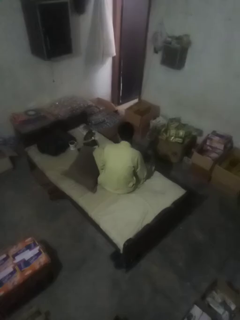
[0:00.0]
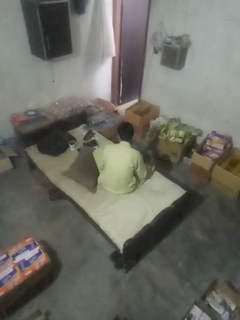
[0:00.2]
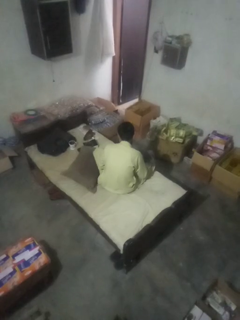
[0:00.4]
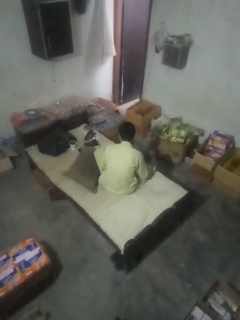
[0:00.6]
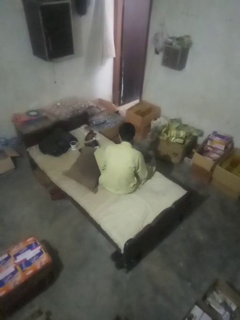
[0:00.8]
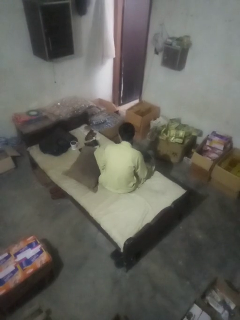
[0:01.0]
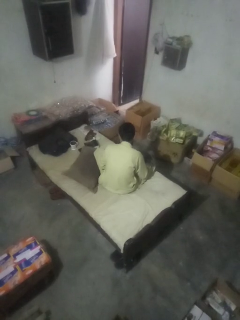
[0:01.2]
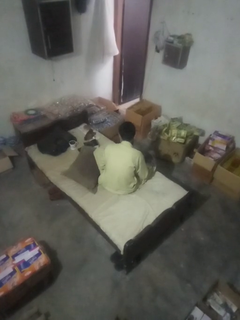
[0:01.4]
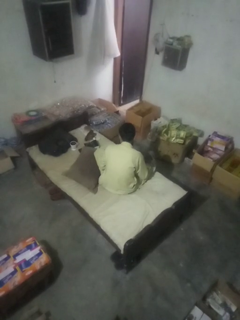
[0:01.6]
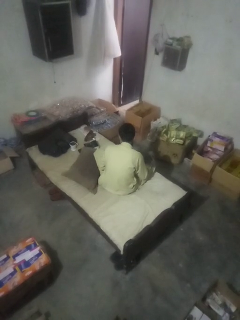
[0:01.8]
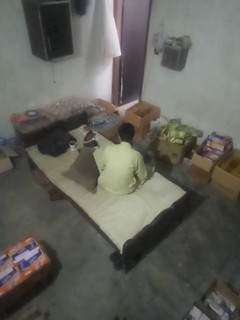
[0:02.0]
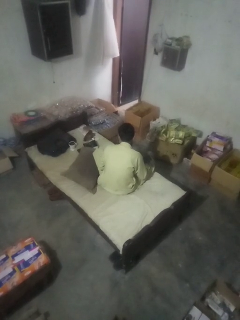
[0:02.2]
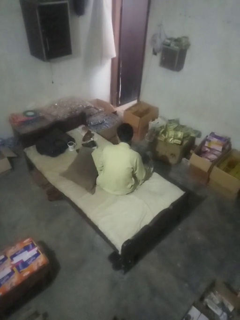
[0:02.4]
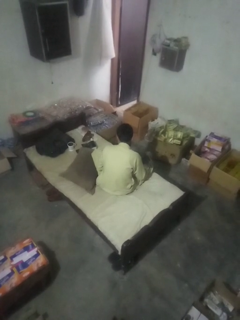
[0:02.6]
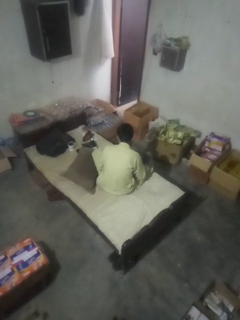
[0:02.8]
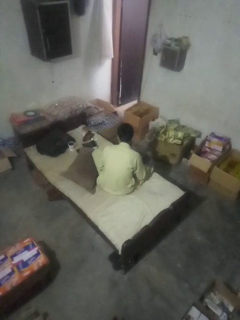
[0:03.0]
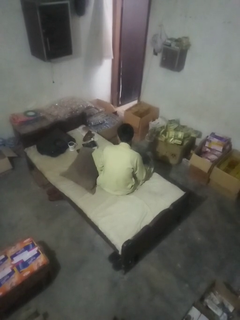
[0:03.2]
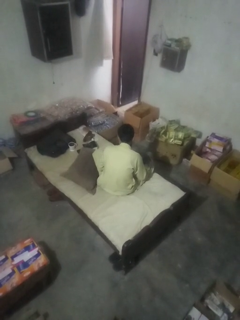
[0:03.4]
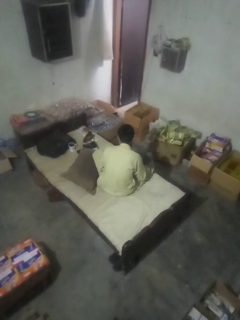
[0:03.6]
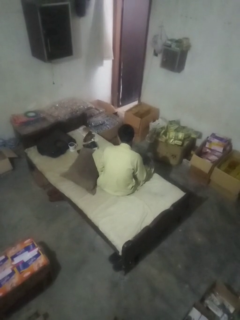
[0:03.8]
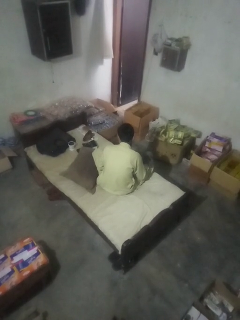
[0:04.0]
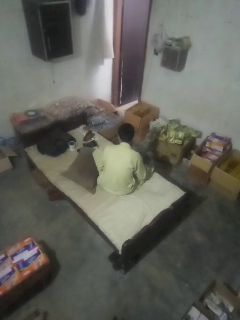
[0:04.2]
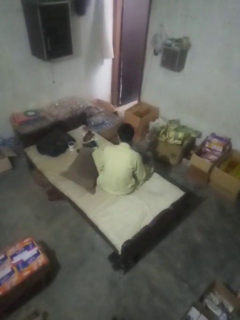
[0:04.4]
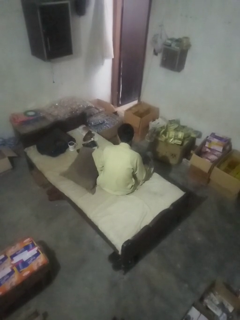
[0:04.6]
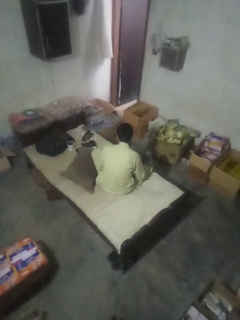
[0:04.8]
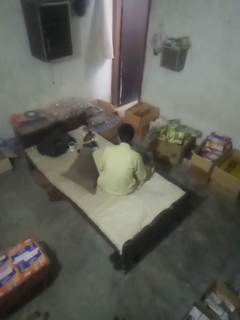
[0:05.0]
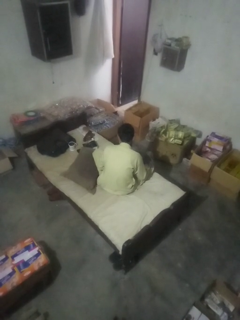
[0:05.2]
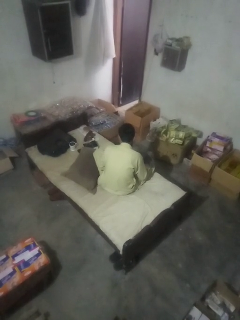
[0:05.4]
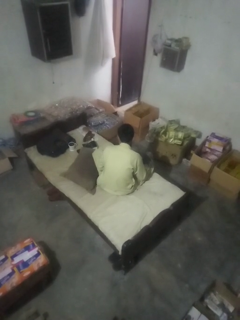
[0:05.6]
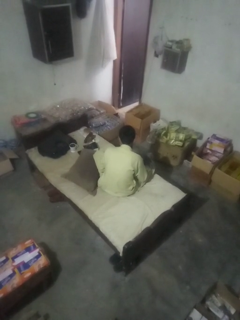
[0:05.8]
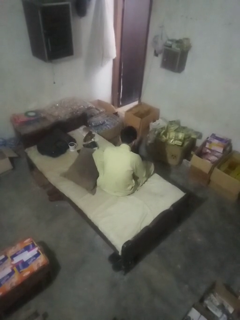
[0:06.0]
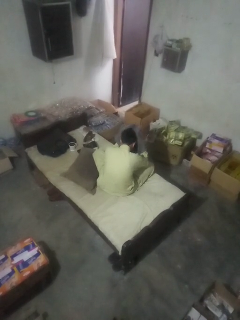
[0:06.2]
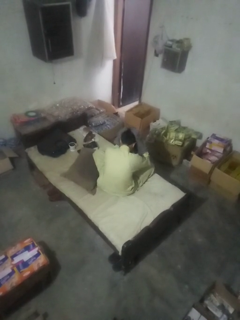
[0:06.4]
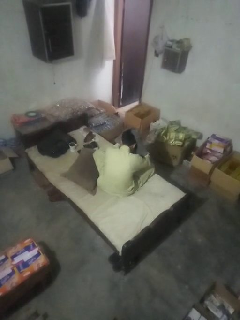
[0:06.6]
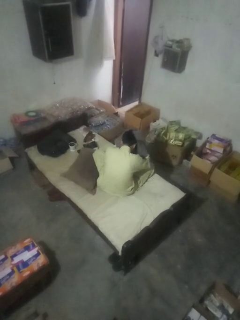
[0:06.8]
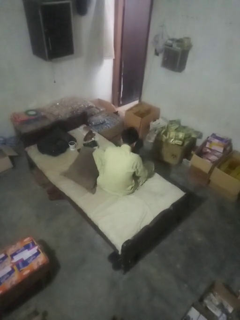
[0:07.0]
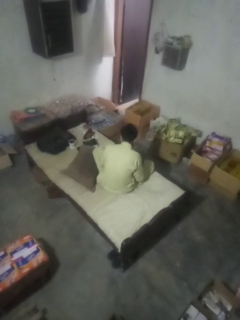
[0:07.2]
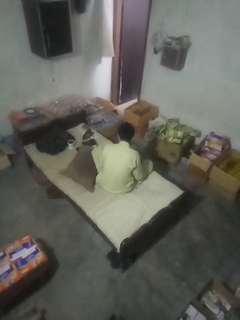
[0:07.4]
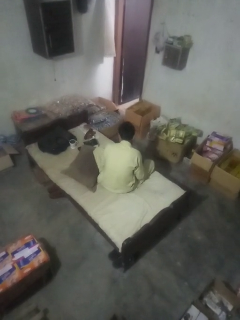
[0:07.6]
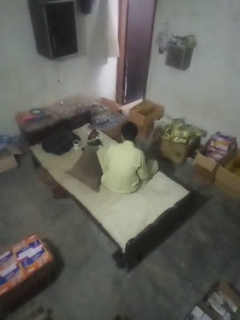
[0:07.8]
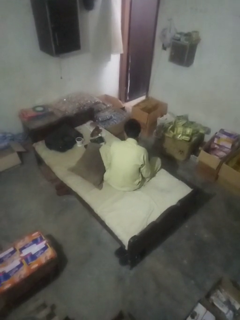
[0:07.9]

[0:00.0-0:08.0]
person dries hair with hairdryer

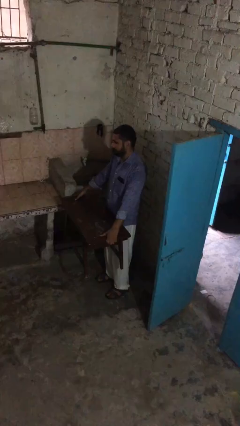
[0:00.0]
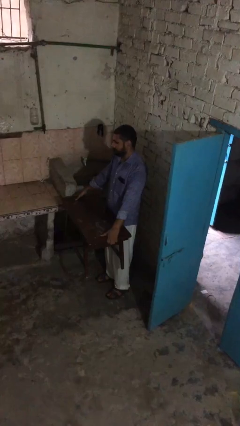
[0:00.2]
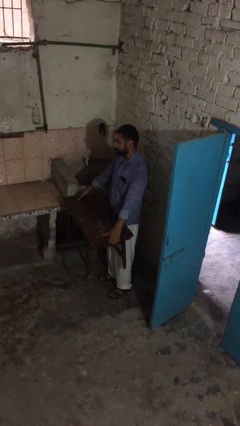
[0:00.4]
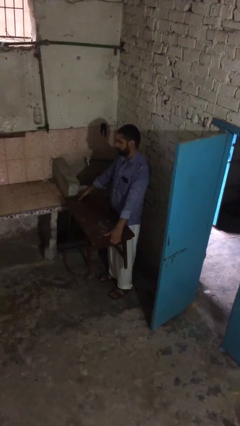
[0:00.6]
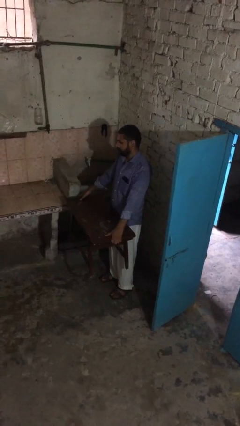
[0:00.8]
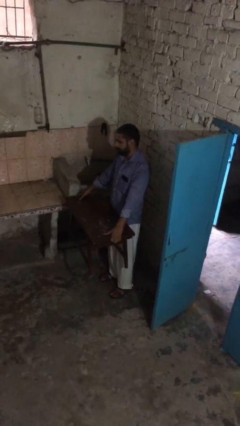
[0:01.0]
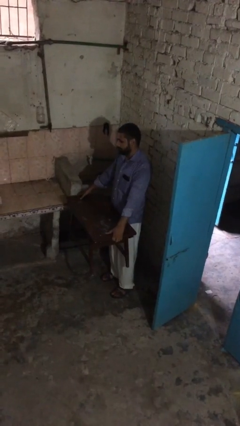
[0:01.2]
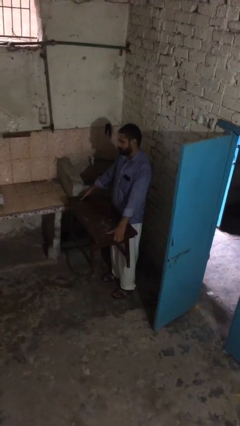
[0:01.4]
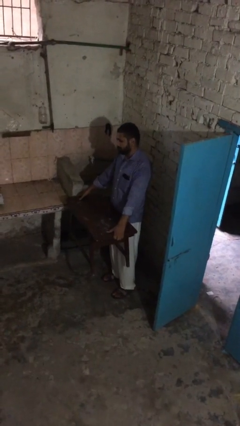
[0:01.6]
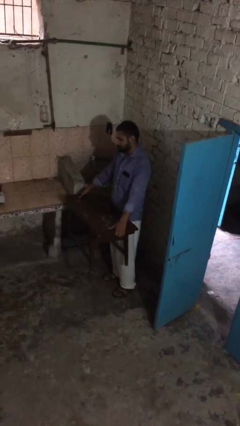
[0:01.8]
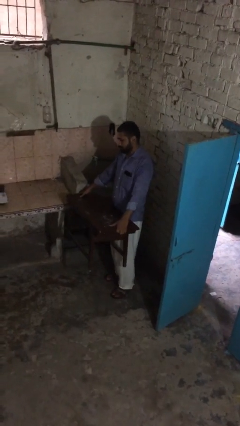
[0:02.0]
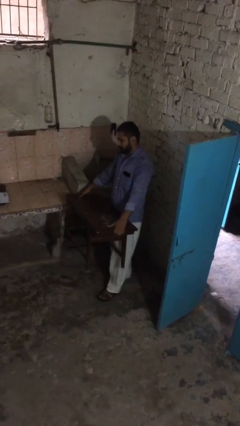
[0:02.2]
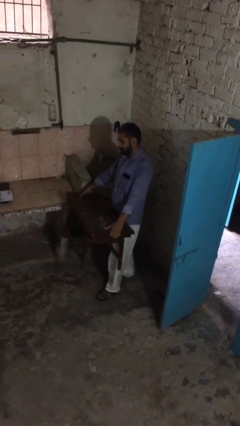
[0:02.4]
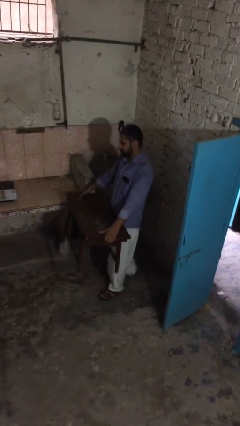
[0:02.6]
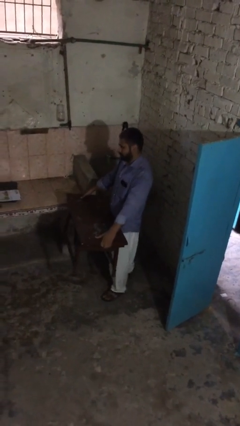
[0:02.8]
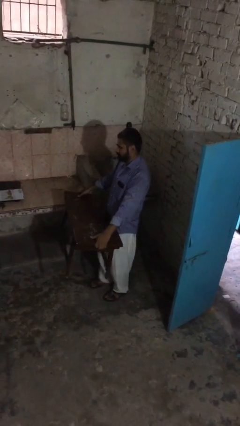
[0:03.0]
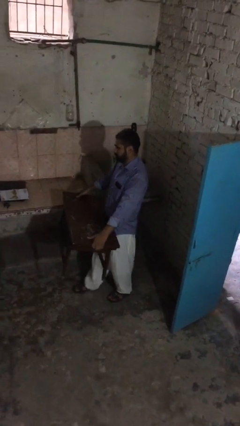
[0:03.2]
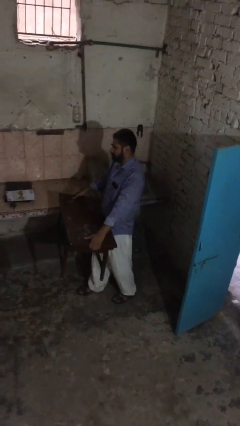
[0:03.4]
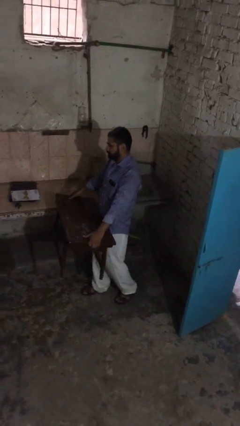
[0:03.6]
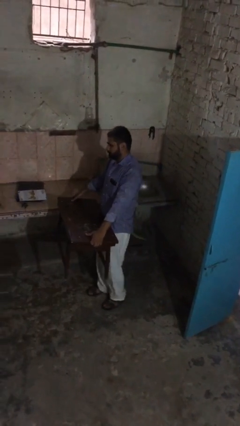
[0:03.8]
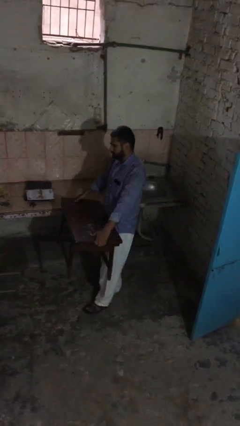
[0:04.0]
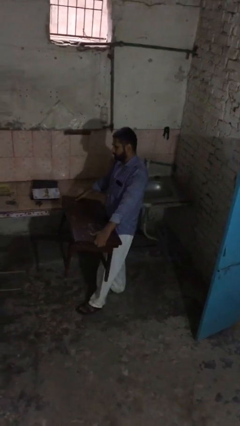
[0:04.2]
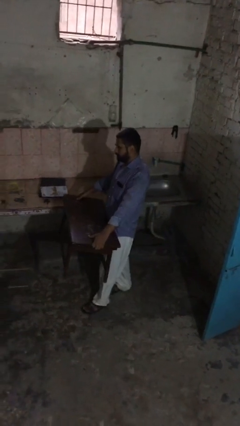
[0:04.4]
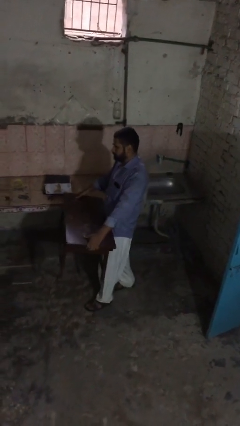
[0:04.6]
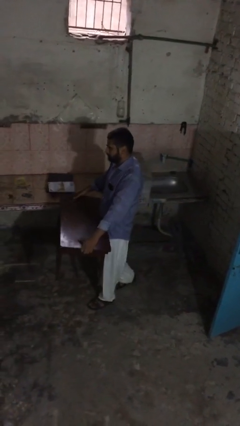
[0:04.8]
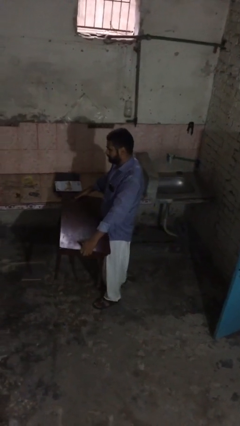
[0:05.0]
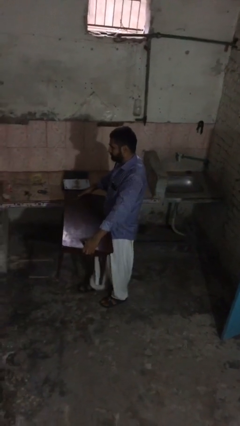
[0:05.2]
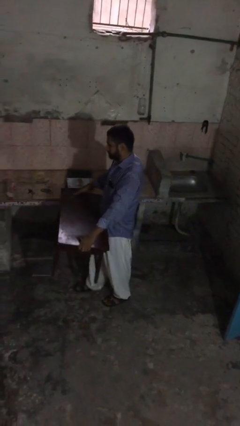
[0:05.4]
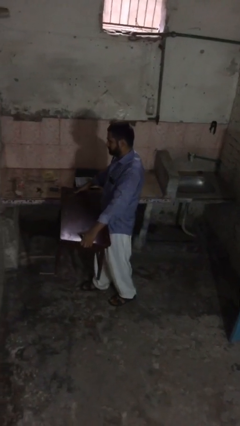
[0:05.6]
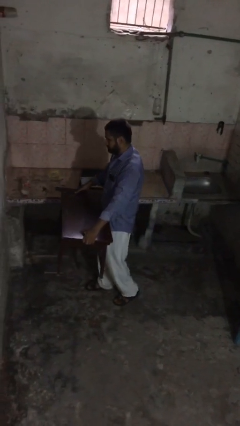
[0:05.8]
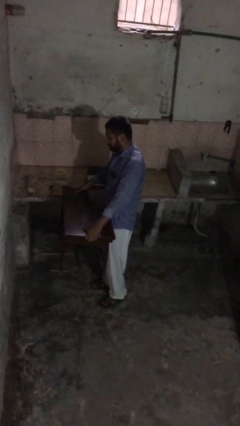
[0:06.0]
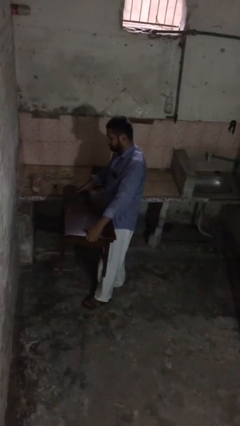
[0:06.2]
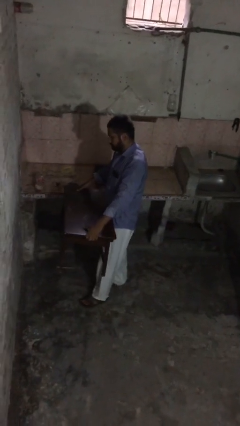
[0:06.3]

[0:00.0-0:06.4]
person carries heavy object

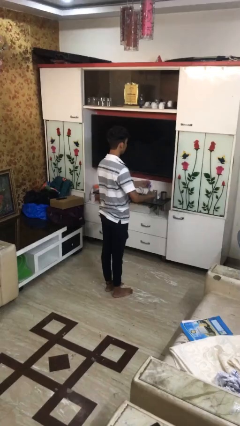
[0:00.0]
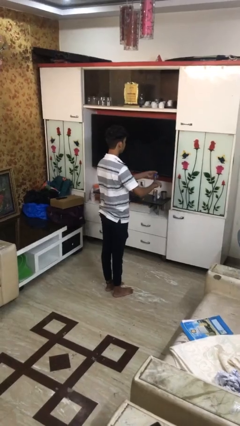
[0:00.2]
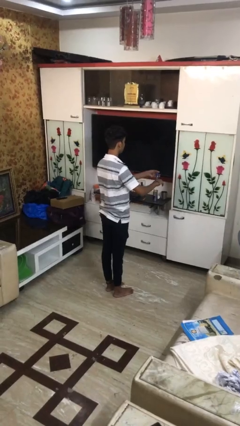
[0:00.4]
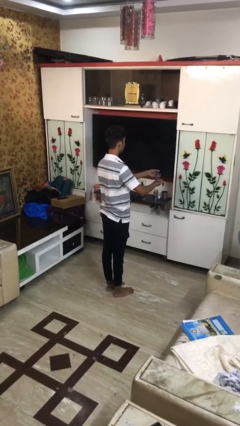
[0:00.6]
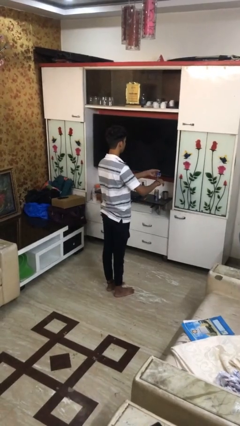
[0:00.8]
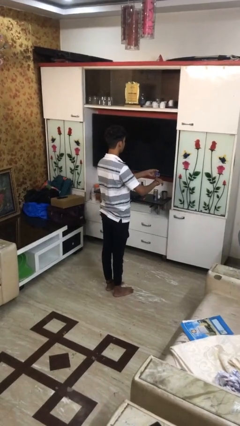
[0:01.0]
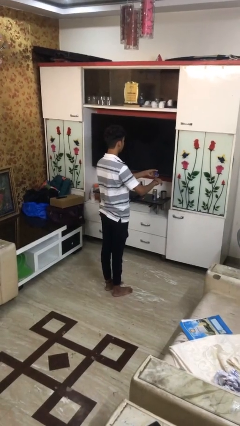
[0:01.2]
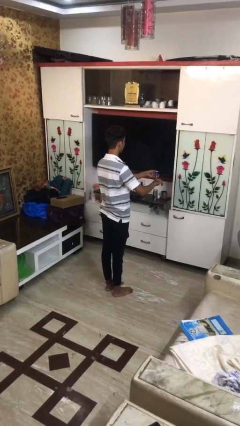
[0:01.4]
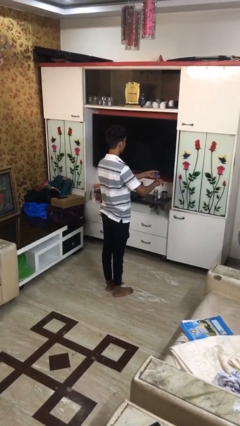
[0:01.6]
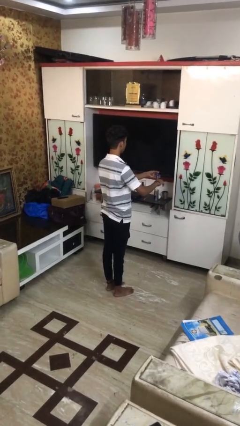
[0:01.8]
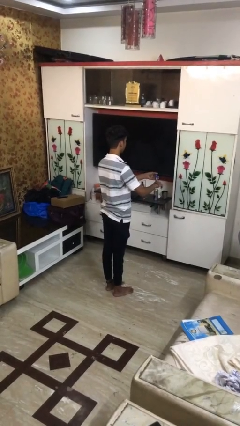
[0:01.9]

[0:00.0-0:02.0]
person clips fingernails

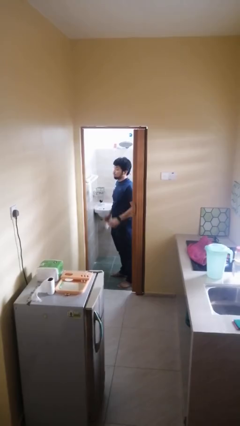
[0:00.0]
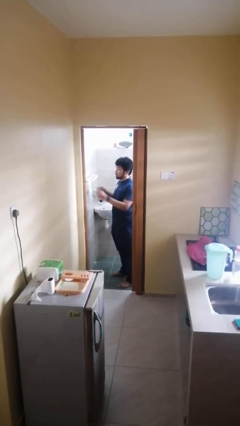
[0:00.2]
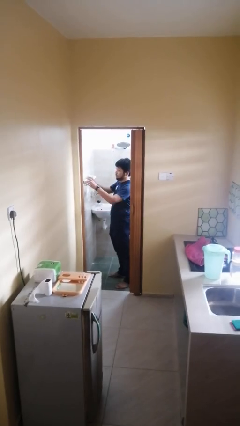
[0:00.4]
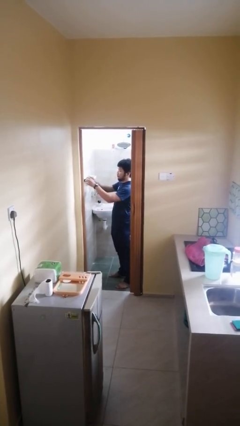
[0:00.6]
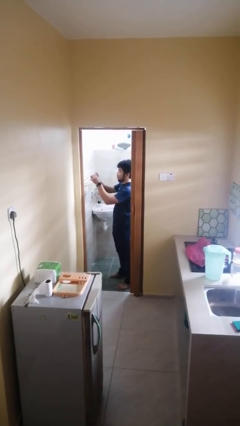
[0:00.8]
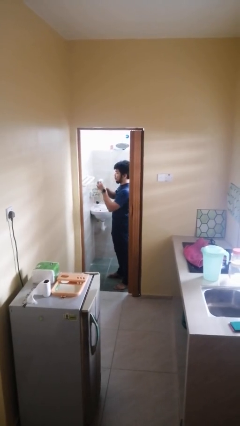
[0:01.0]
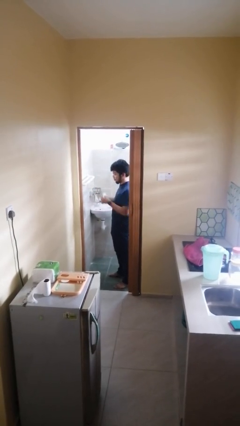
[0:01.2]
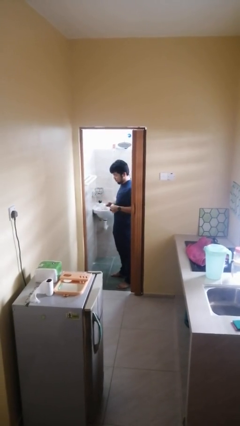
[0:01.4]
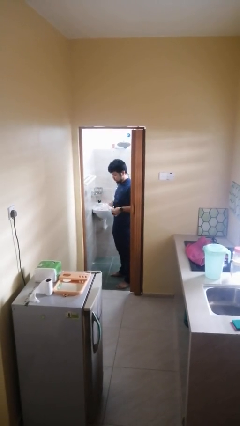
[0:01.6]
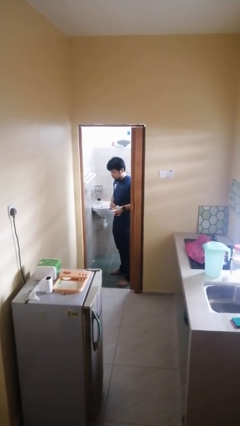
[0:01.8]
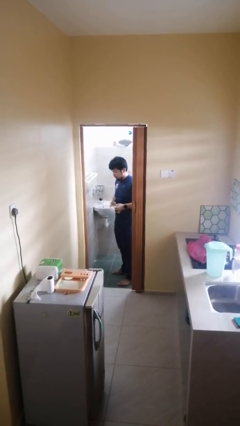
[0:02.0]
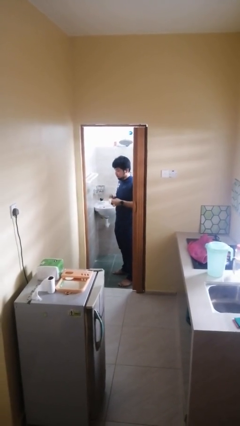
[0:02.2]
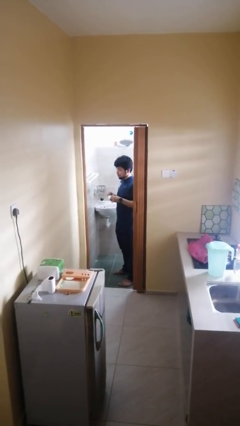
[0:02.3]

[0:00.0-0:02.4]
person picks up object from countertop

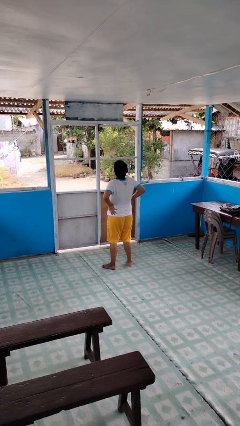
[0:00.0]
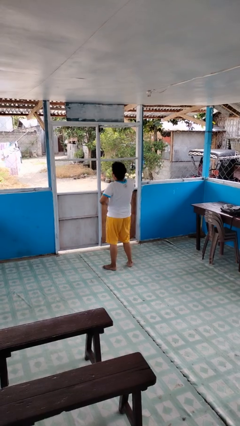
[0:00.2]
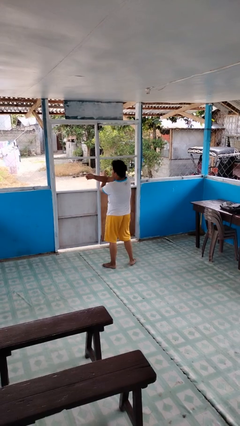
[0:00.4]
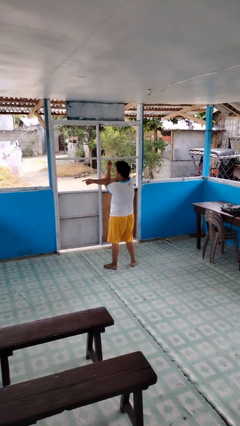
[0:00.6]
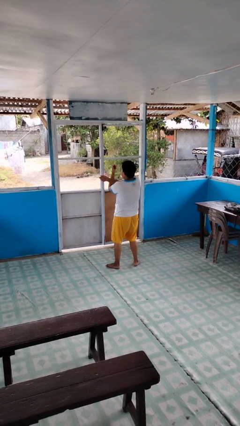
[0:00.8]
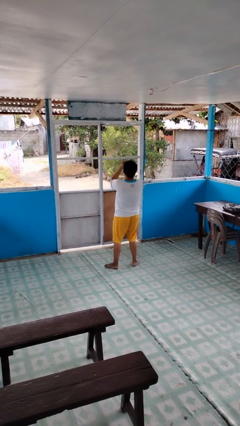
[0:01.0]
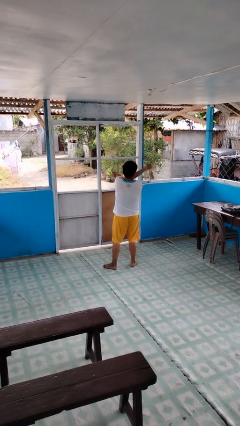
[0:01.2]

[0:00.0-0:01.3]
person stretches arms to side
